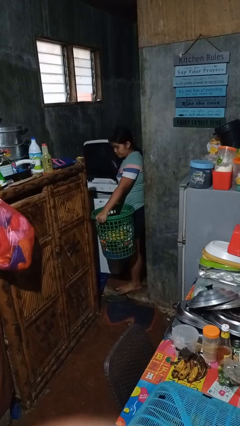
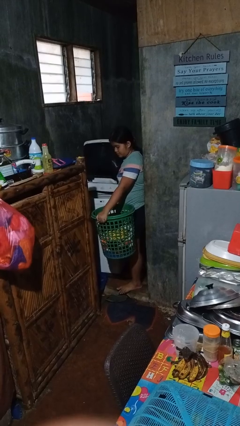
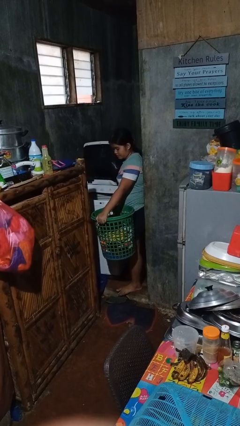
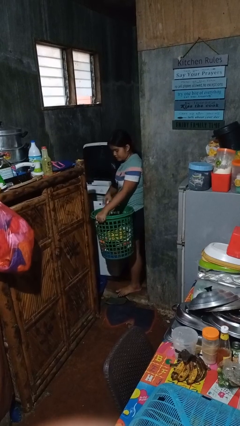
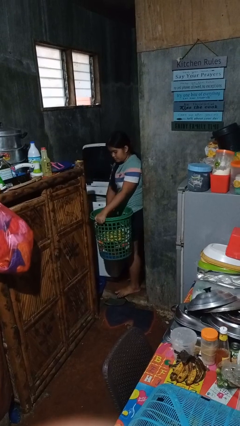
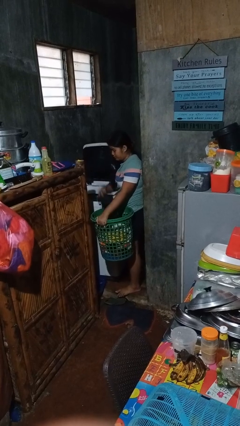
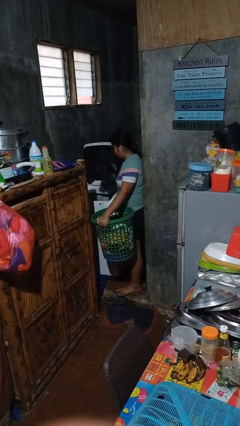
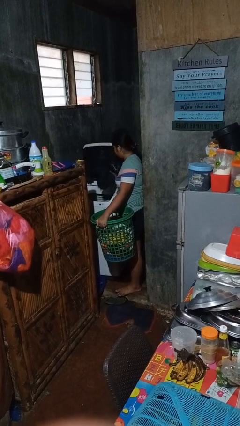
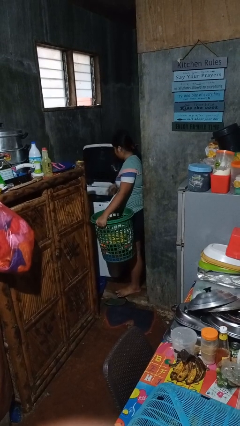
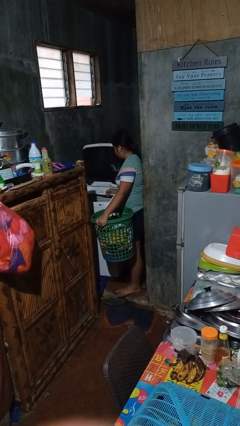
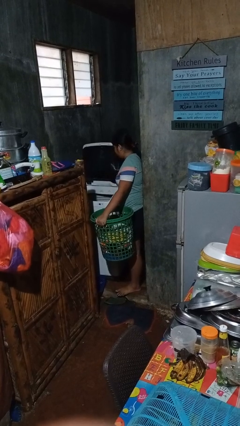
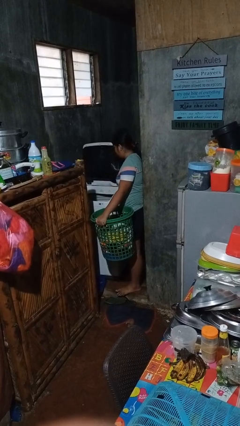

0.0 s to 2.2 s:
person loads clotheswasher

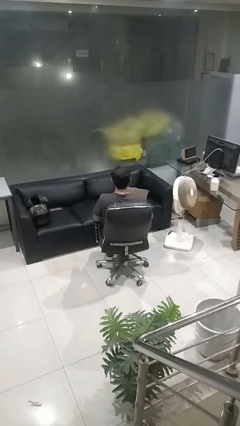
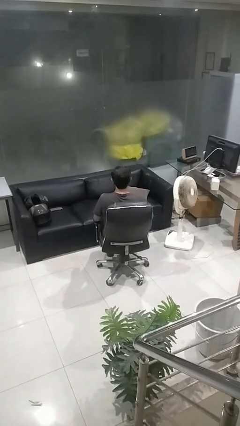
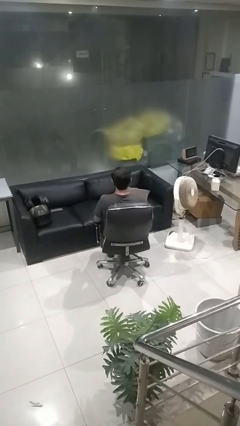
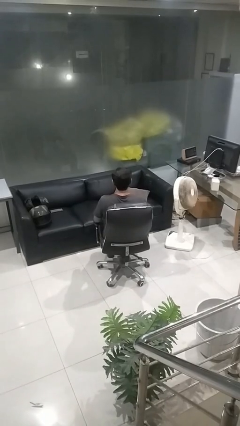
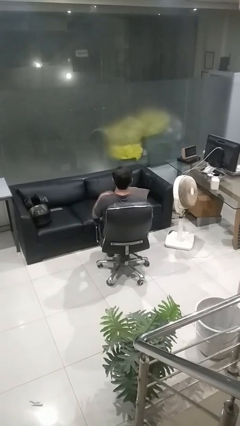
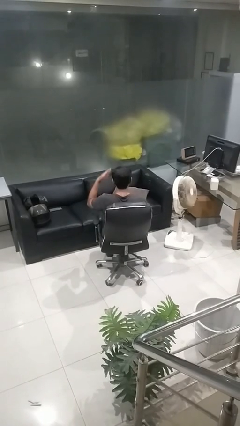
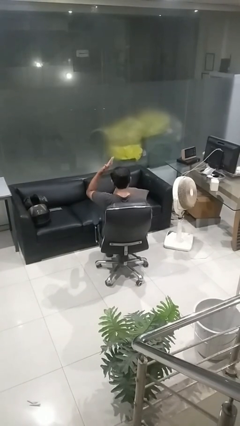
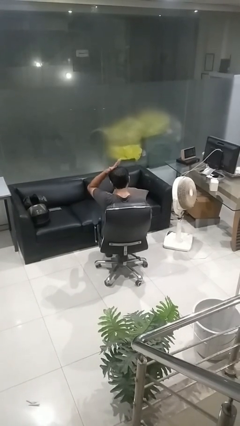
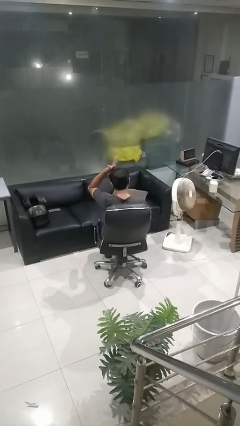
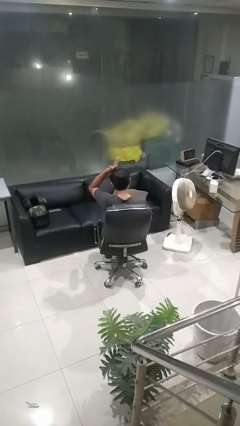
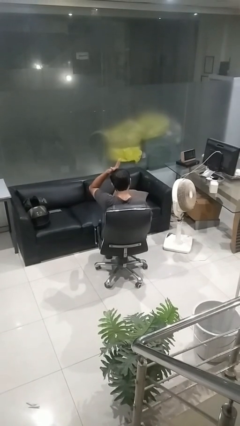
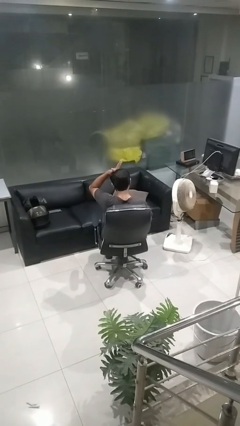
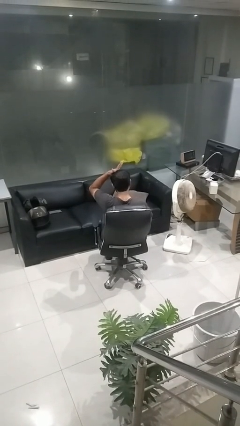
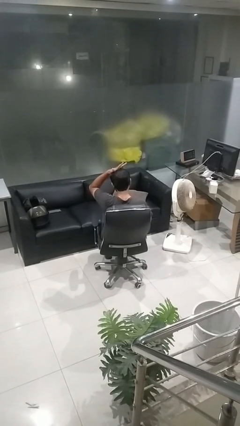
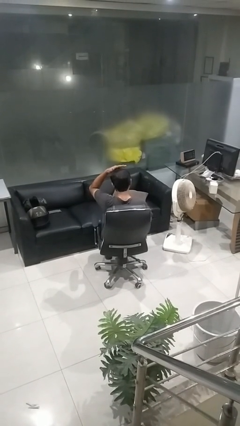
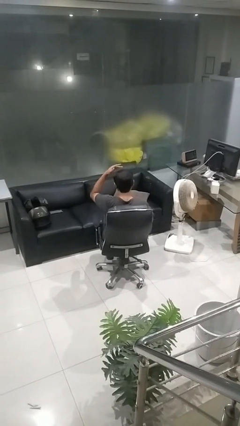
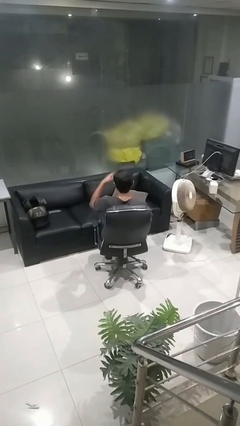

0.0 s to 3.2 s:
person pats head

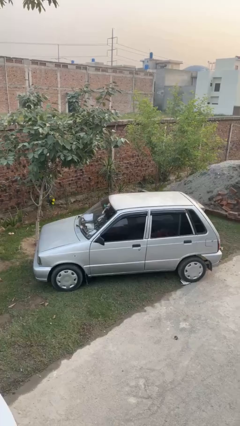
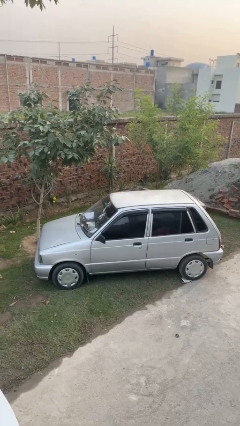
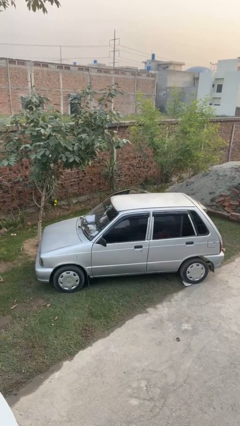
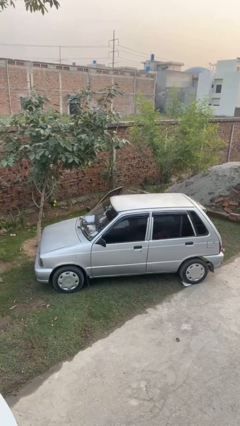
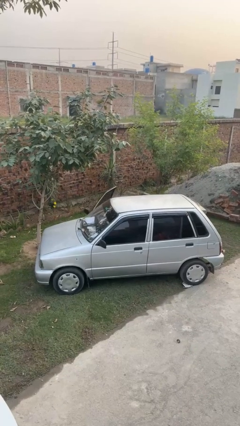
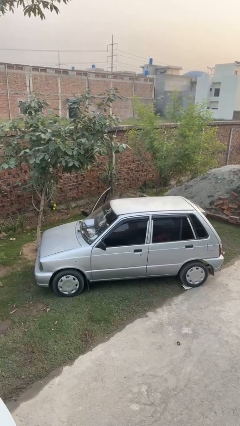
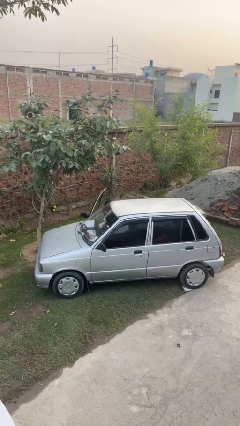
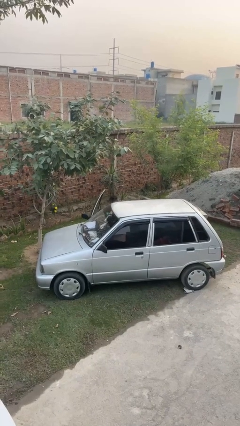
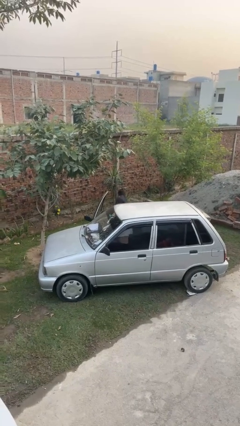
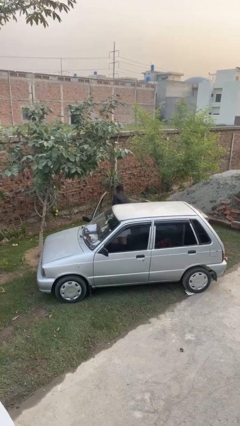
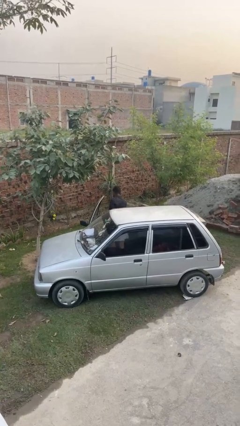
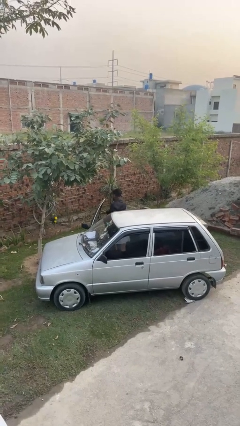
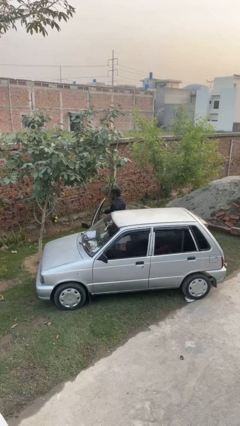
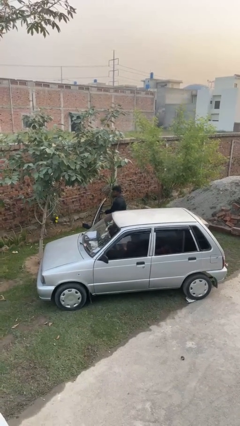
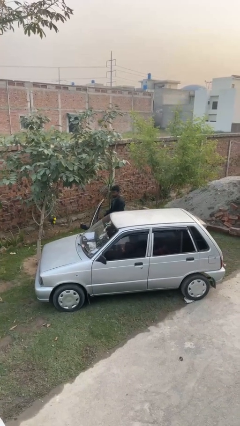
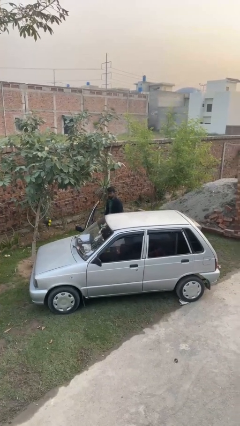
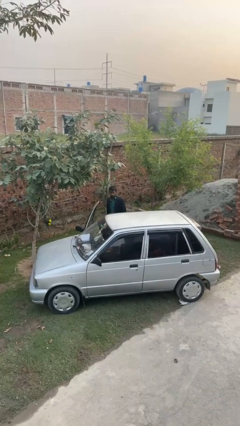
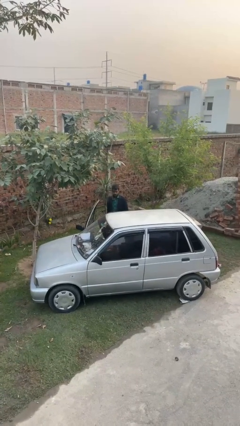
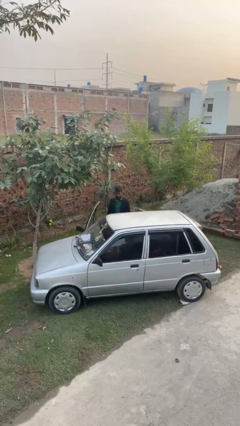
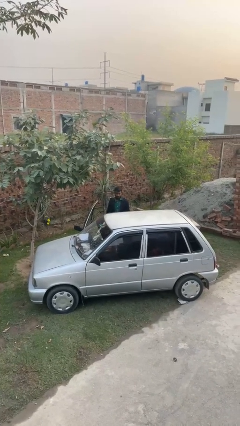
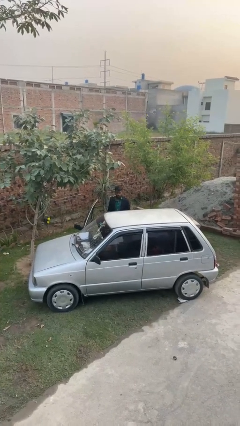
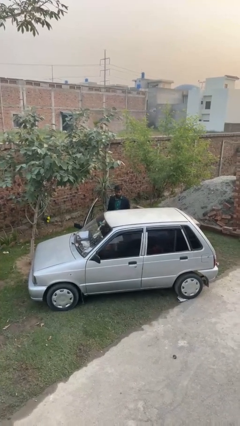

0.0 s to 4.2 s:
person exits car

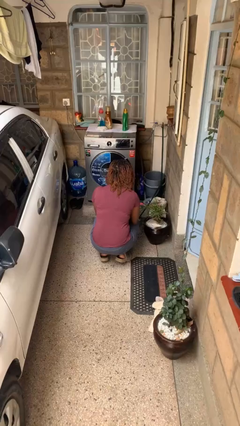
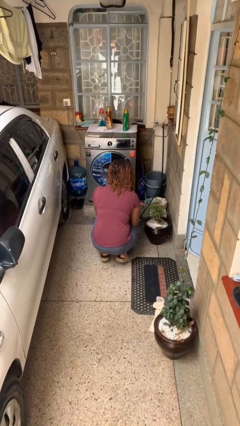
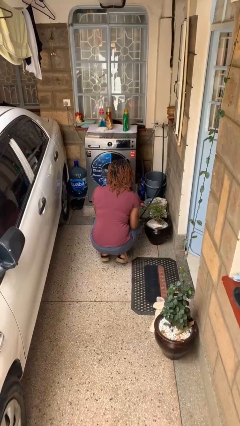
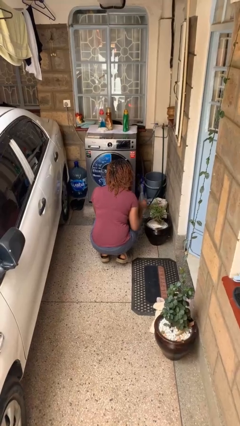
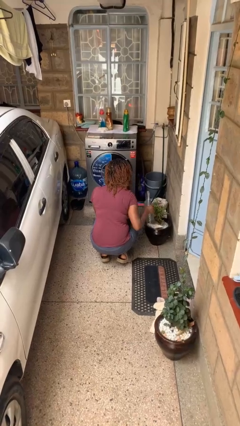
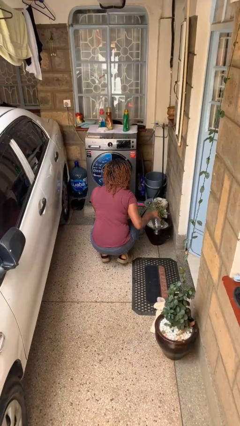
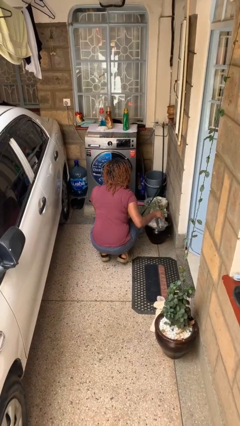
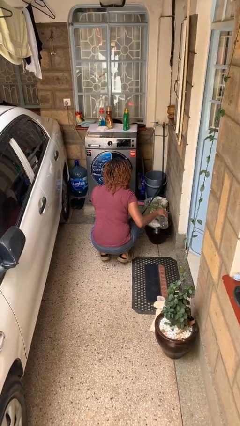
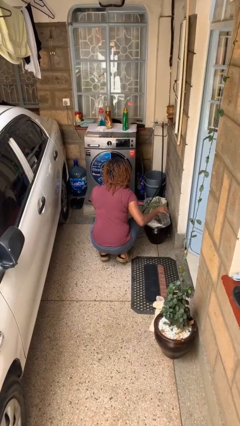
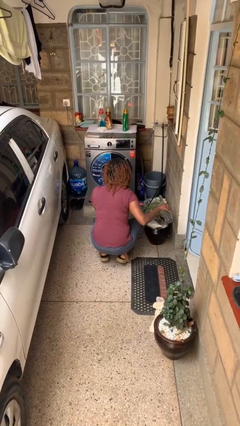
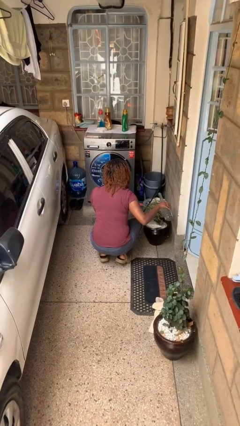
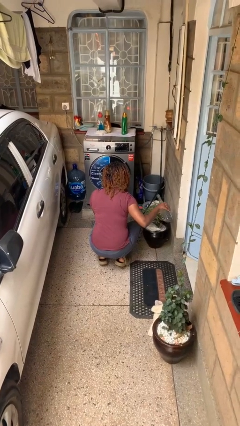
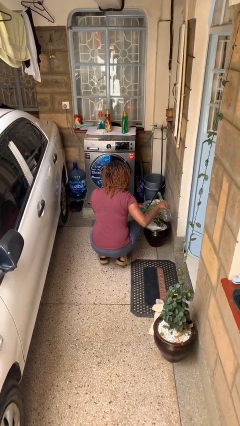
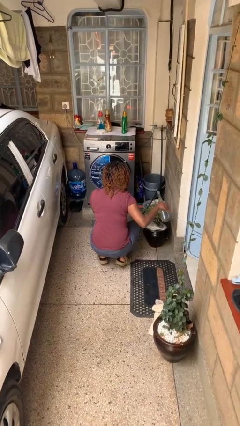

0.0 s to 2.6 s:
person waters houseplant

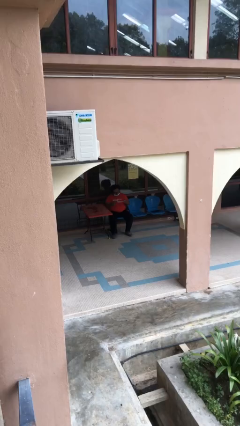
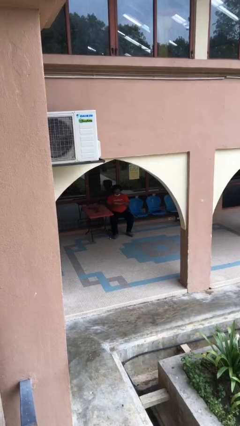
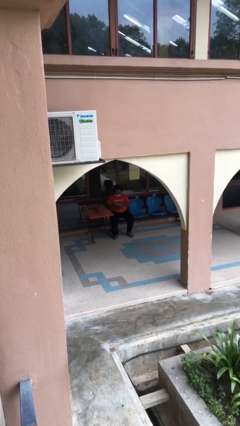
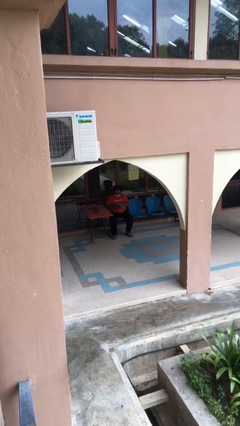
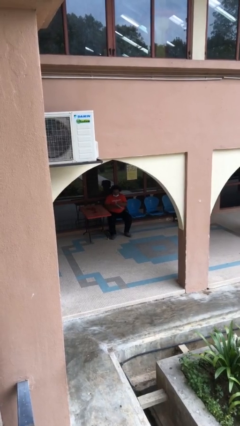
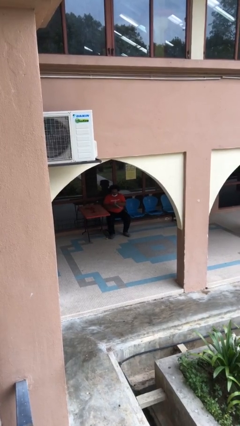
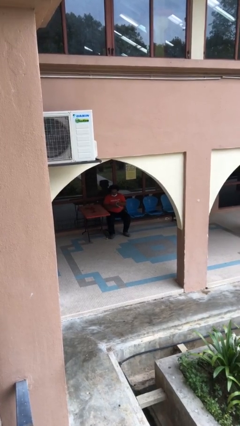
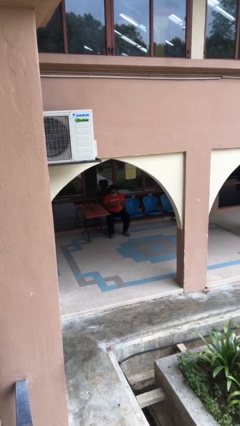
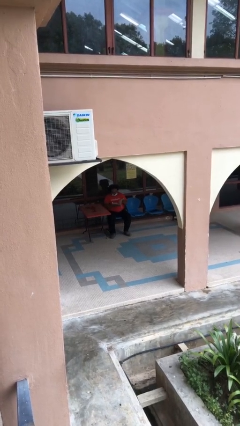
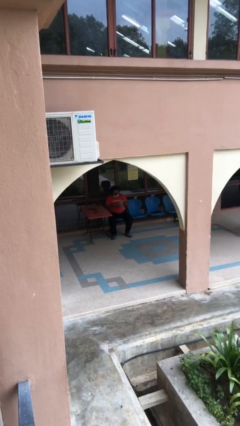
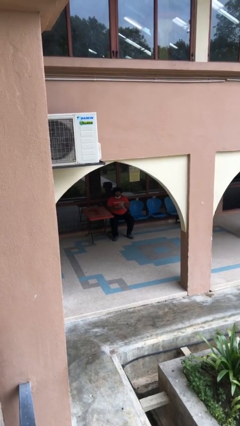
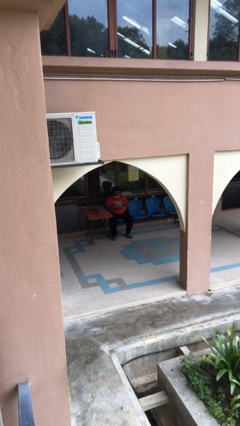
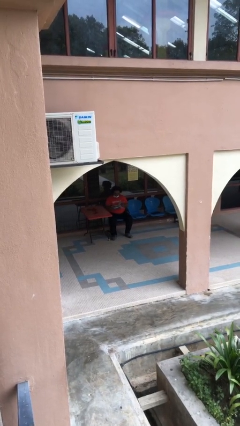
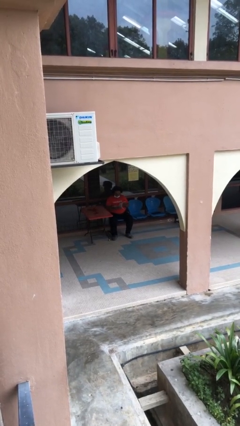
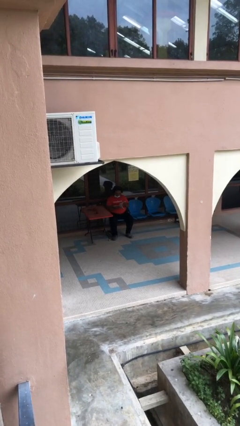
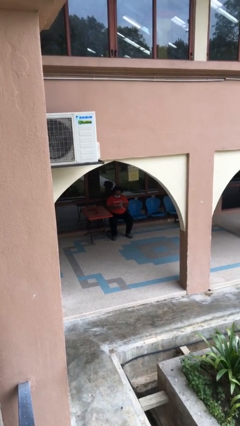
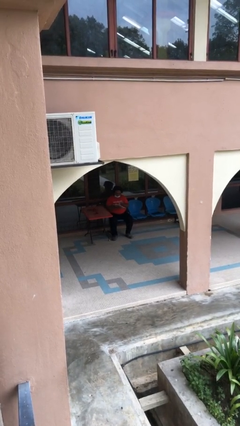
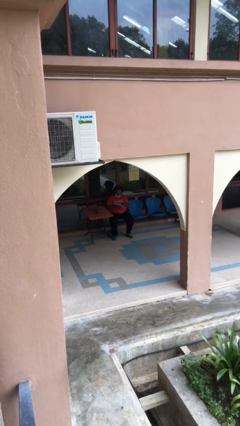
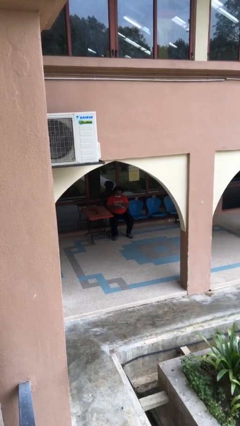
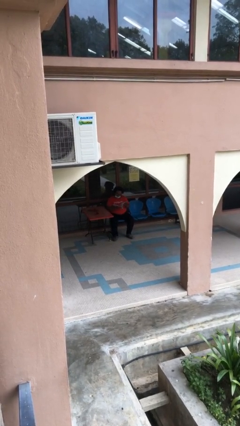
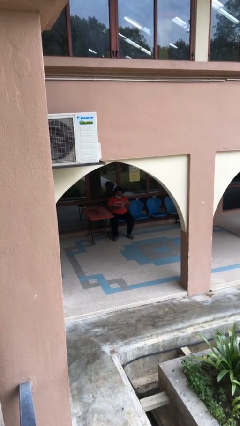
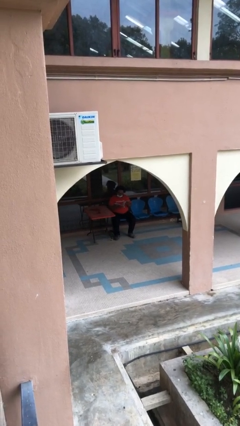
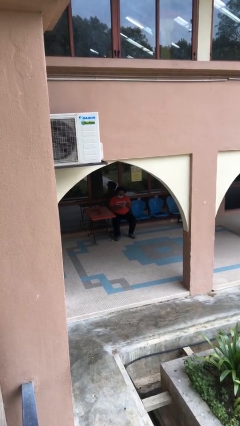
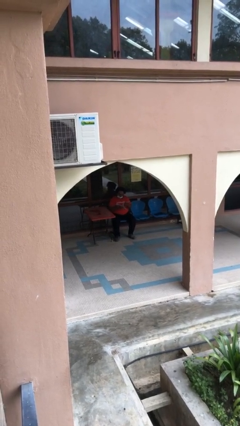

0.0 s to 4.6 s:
person reads document

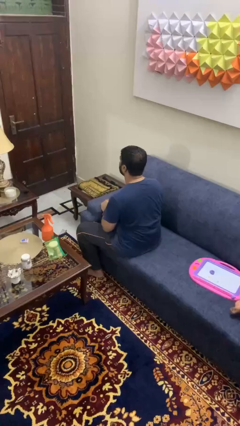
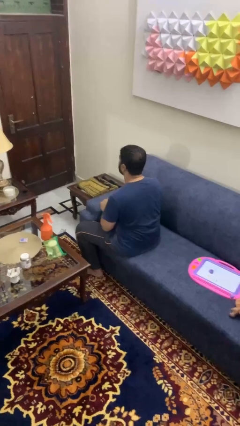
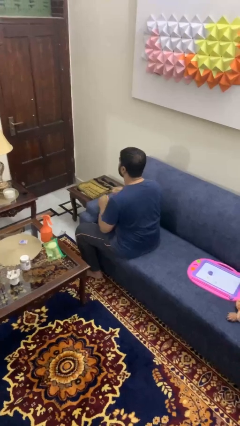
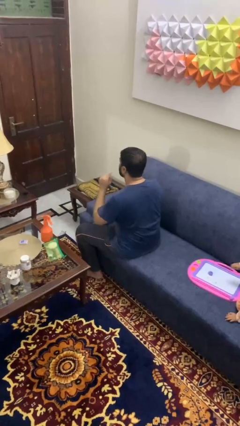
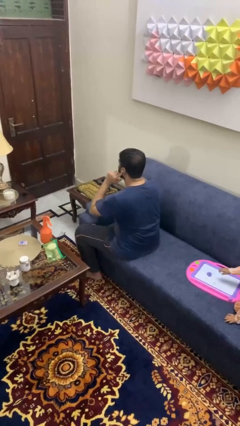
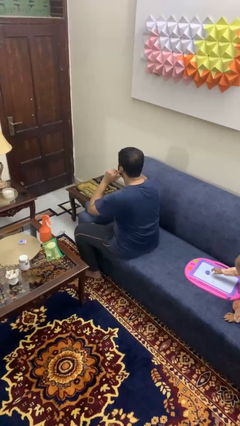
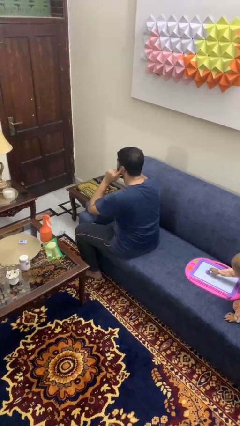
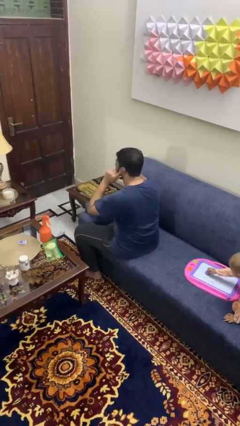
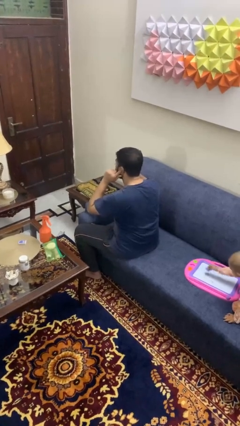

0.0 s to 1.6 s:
person puts fingers in ear
